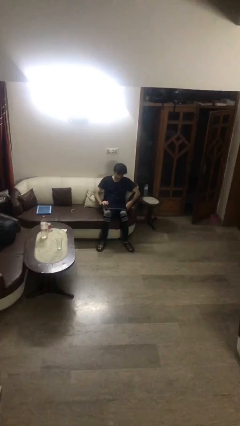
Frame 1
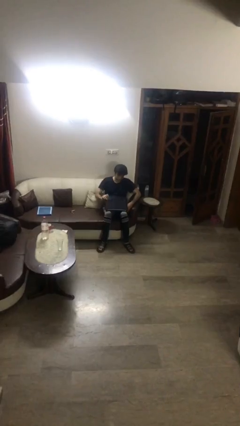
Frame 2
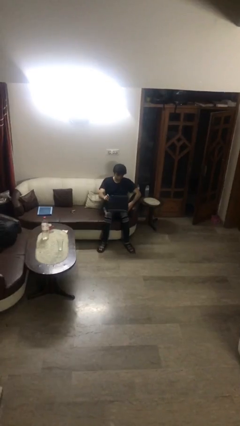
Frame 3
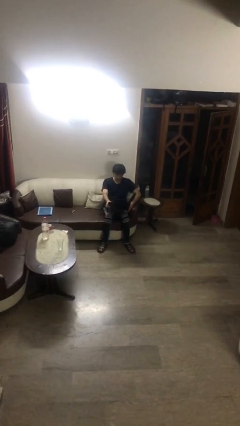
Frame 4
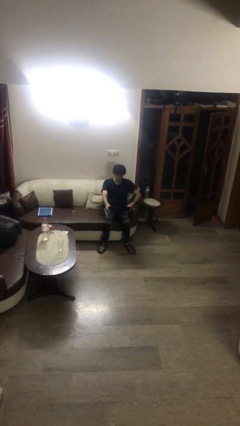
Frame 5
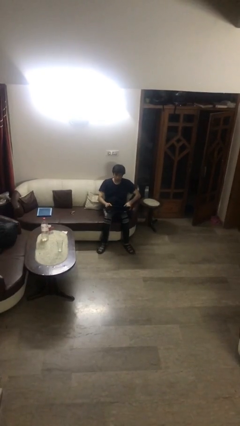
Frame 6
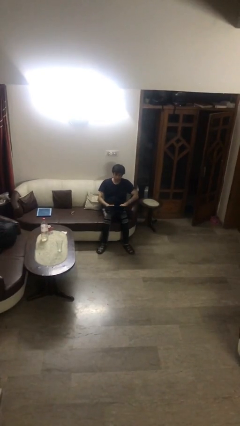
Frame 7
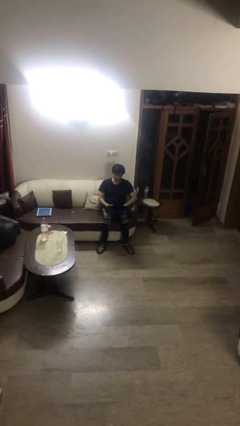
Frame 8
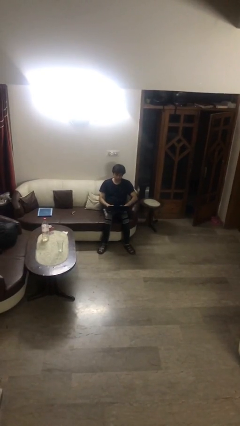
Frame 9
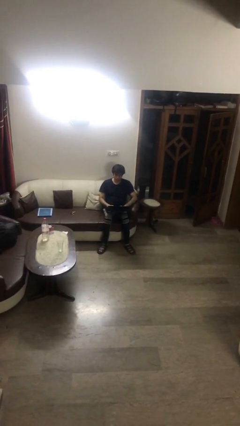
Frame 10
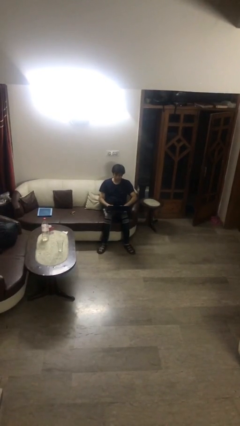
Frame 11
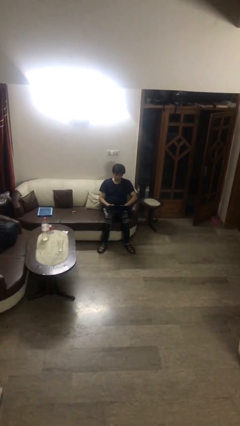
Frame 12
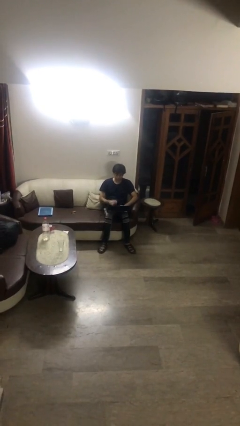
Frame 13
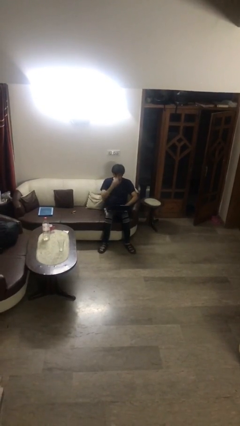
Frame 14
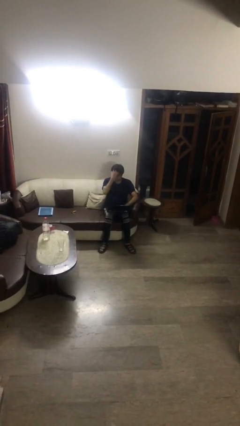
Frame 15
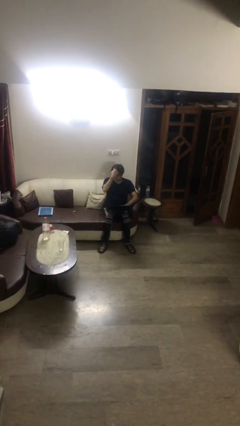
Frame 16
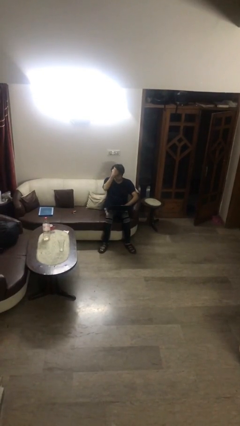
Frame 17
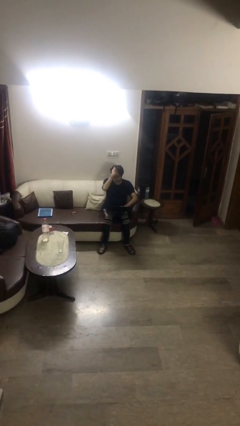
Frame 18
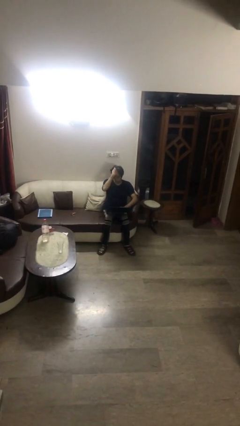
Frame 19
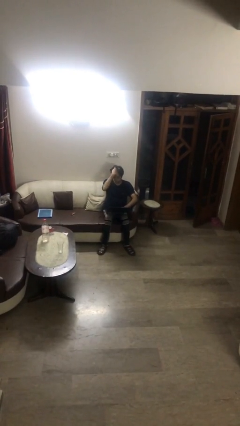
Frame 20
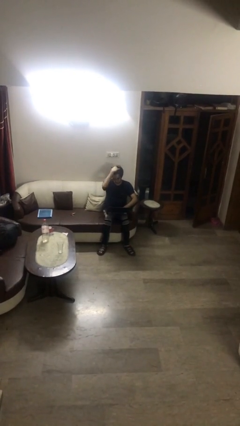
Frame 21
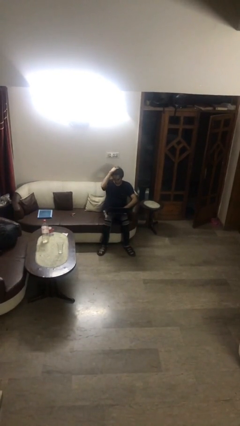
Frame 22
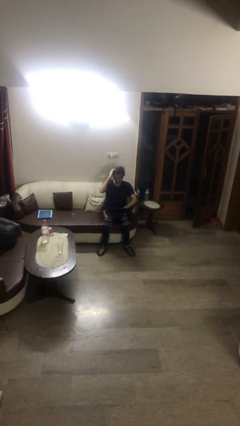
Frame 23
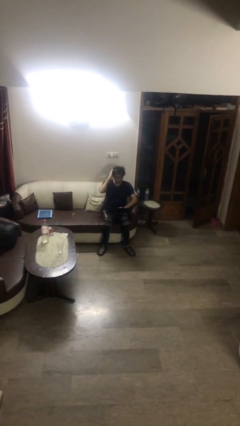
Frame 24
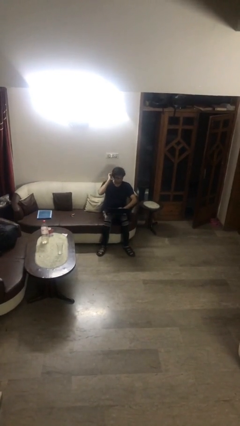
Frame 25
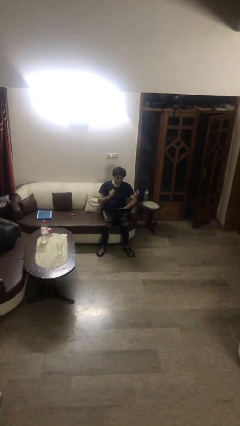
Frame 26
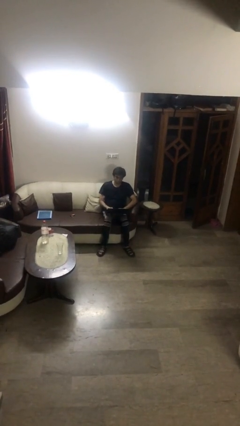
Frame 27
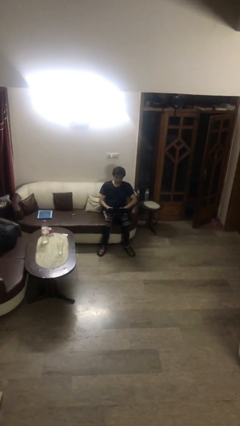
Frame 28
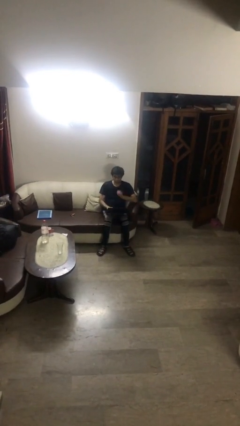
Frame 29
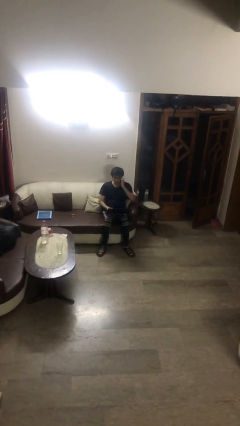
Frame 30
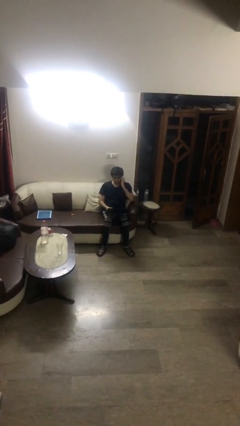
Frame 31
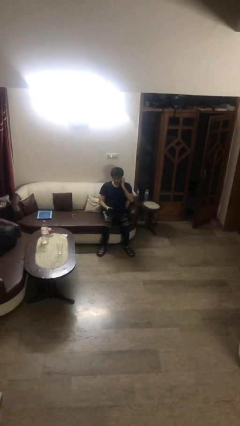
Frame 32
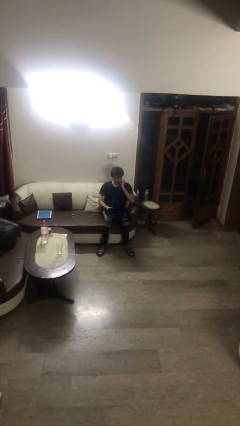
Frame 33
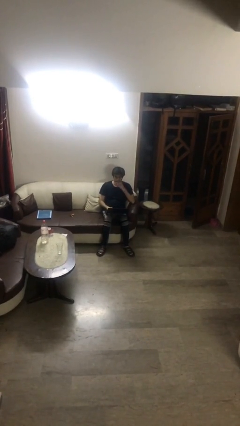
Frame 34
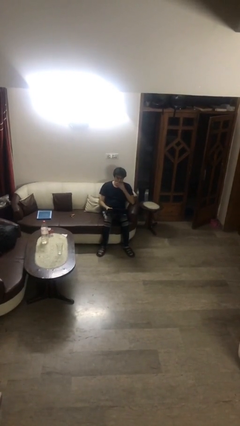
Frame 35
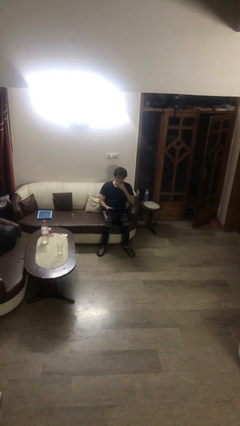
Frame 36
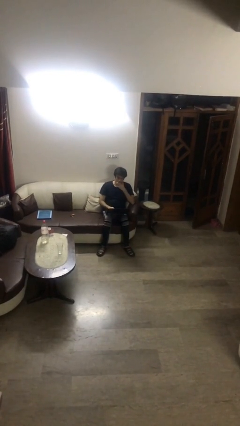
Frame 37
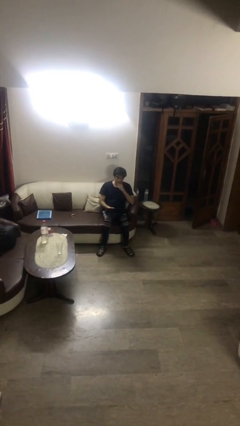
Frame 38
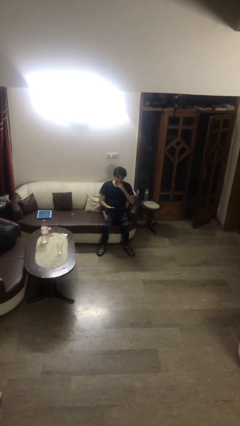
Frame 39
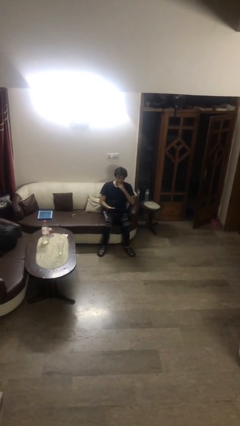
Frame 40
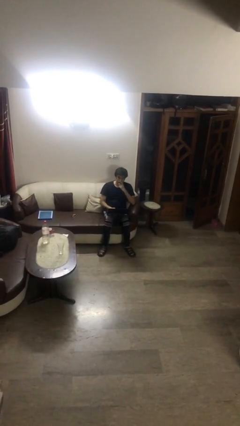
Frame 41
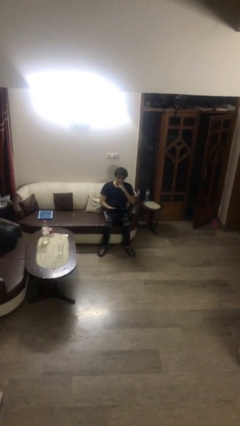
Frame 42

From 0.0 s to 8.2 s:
person interacts with laptop

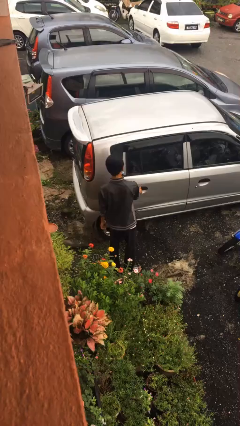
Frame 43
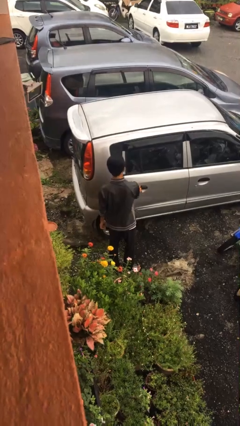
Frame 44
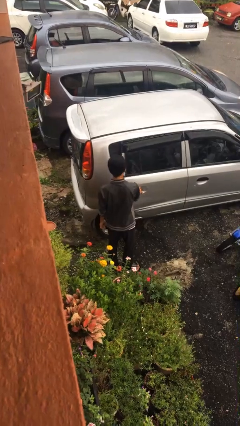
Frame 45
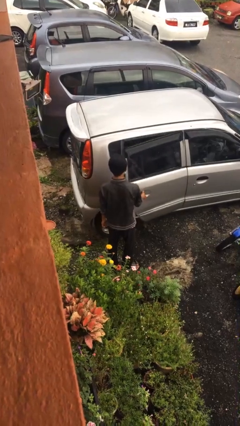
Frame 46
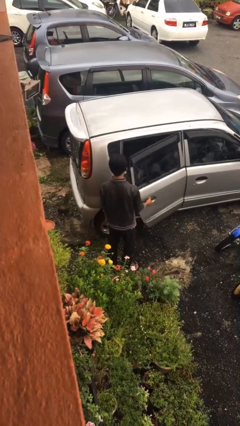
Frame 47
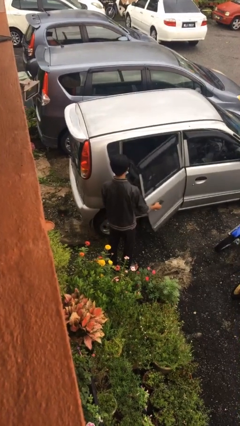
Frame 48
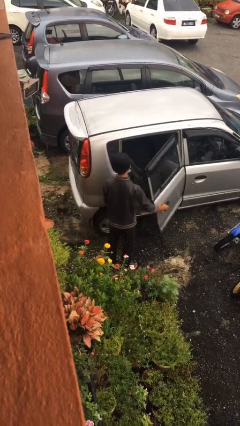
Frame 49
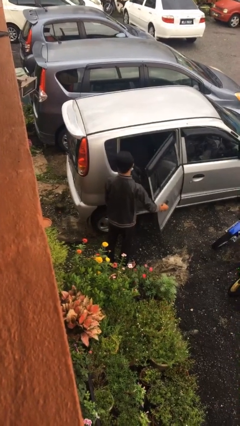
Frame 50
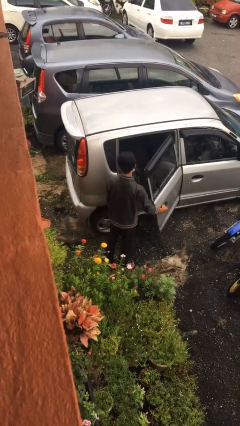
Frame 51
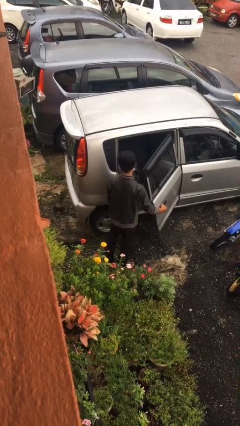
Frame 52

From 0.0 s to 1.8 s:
person opens car door

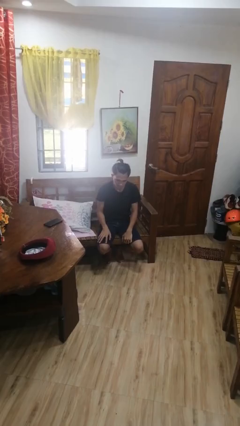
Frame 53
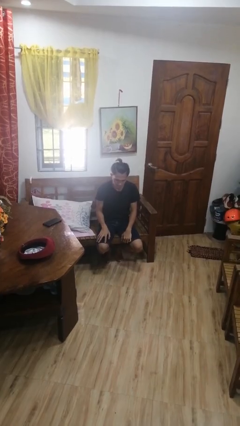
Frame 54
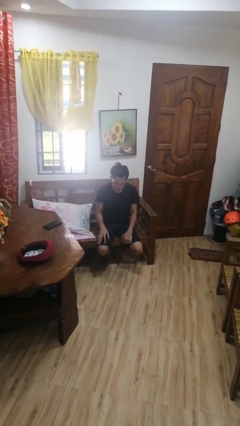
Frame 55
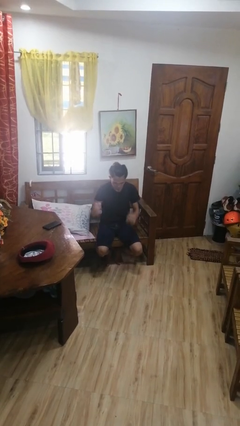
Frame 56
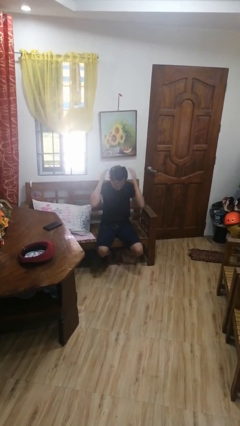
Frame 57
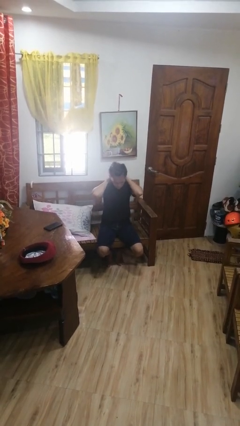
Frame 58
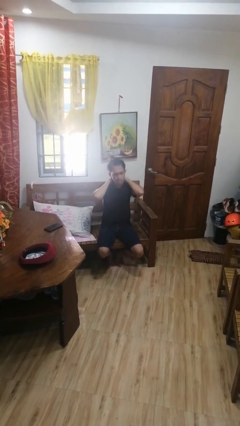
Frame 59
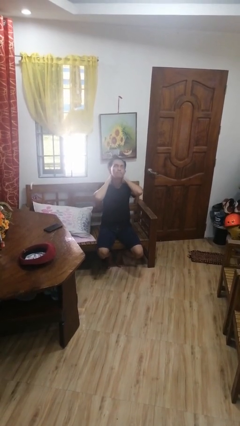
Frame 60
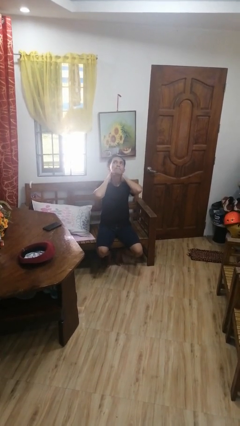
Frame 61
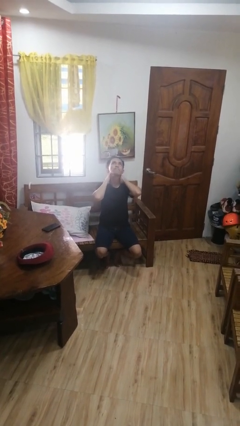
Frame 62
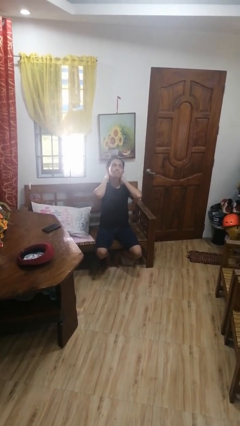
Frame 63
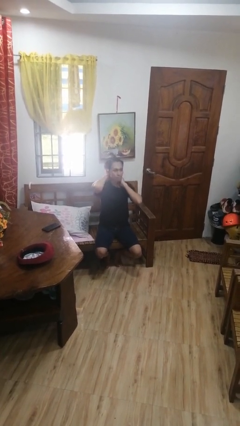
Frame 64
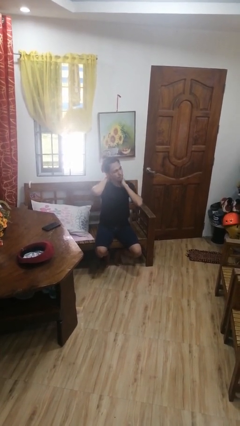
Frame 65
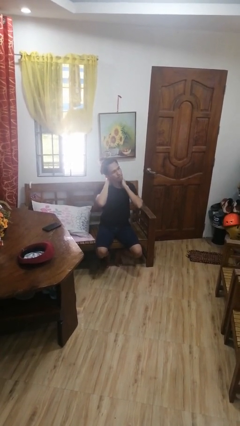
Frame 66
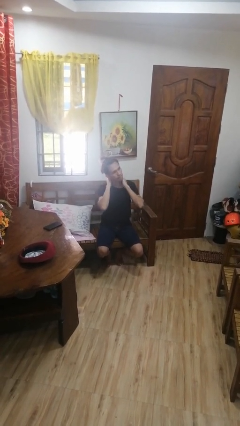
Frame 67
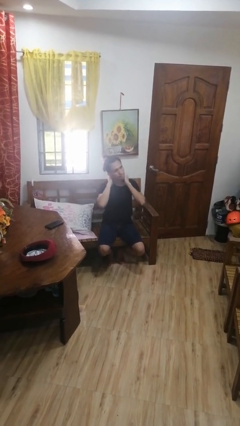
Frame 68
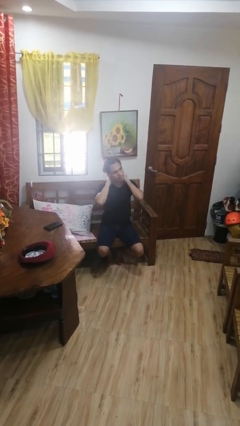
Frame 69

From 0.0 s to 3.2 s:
person rubs neck

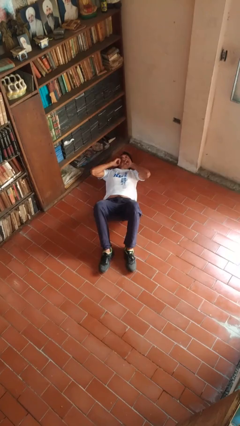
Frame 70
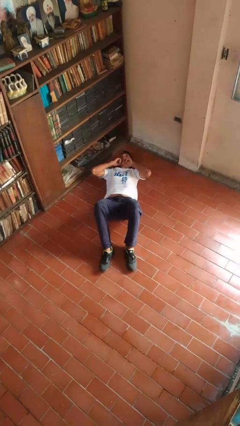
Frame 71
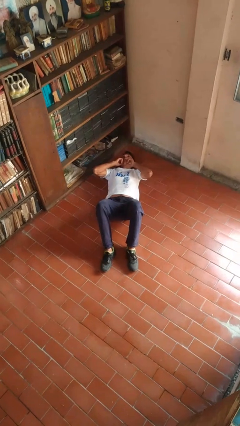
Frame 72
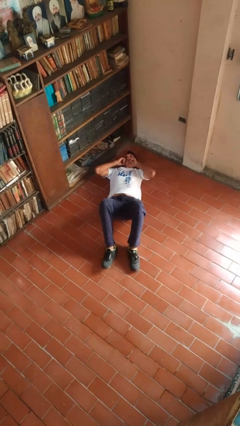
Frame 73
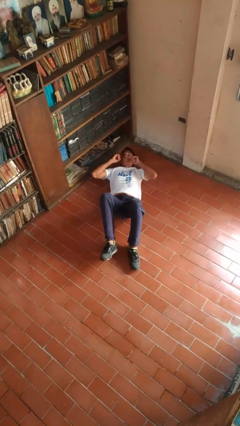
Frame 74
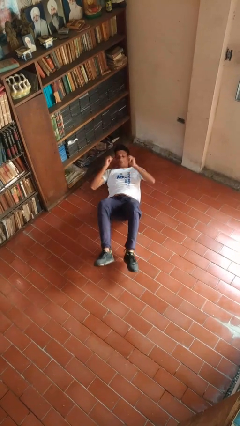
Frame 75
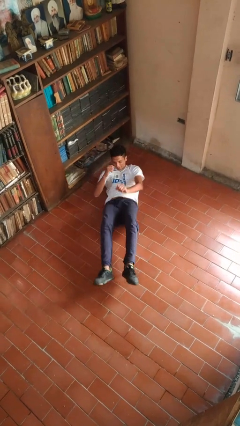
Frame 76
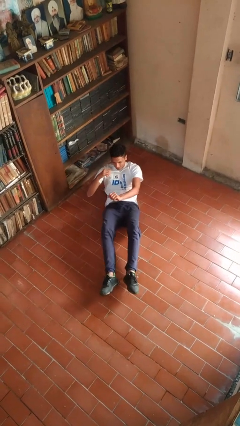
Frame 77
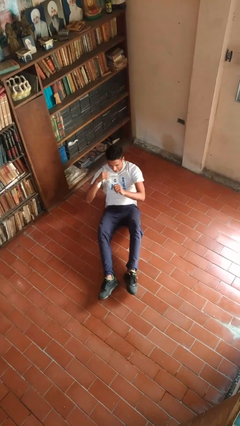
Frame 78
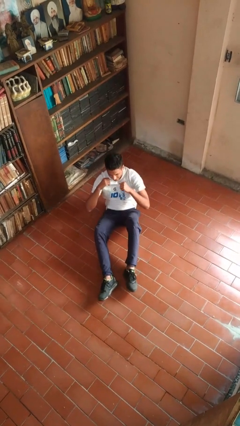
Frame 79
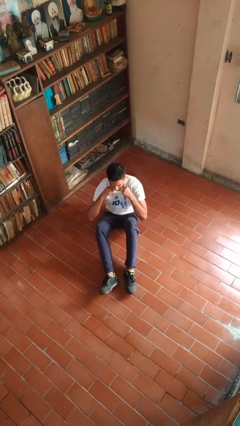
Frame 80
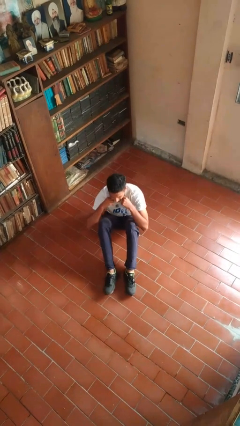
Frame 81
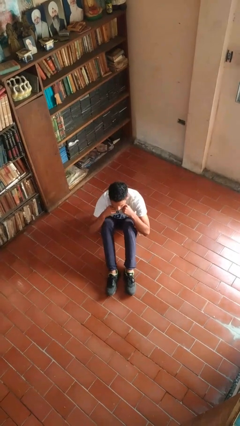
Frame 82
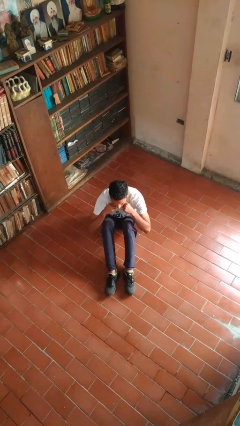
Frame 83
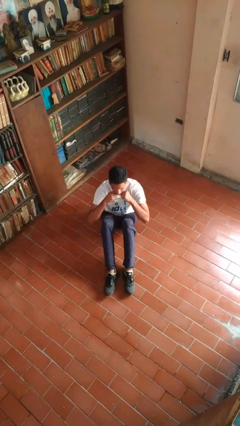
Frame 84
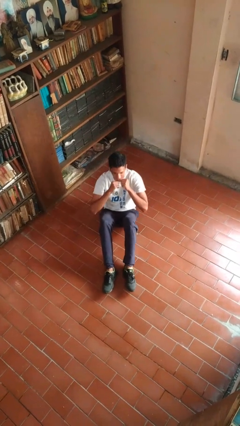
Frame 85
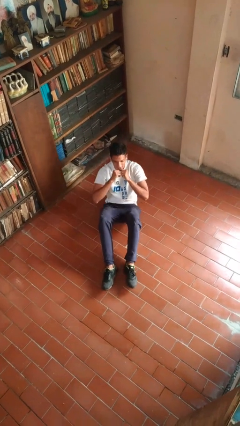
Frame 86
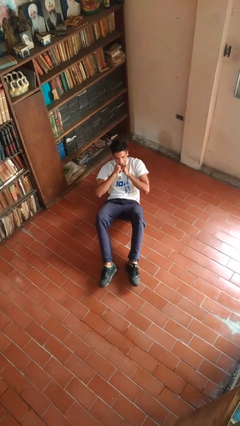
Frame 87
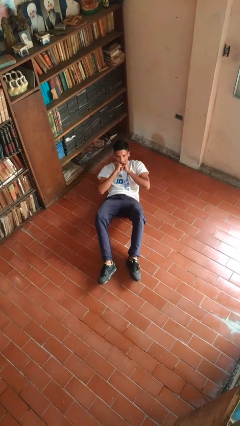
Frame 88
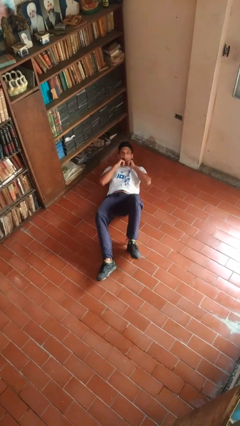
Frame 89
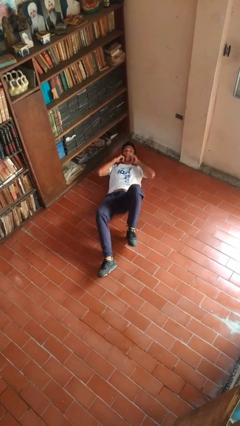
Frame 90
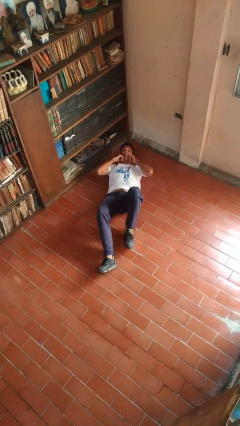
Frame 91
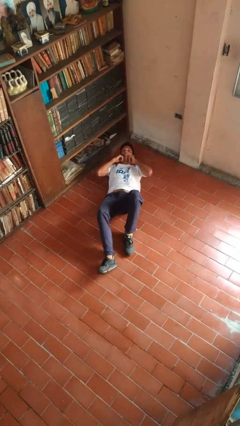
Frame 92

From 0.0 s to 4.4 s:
person exercises with situp

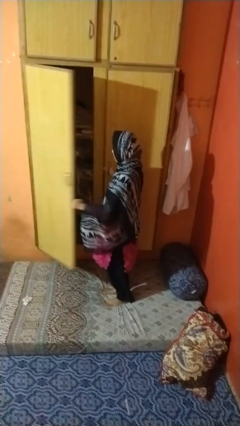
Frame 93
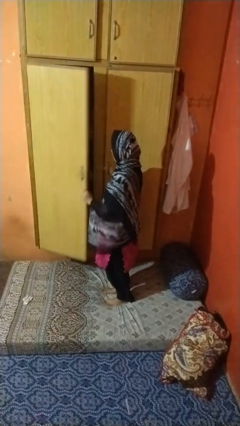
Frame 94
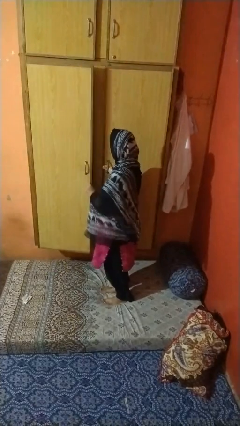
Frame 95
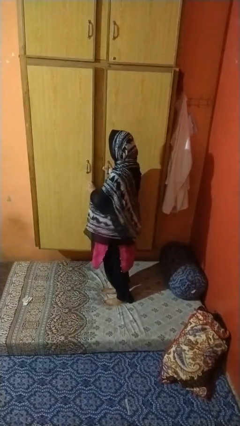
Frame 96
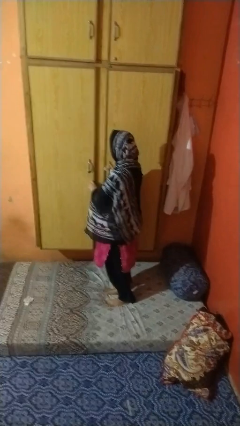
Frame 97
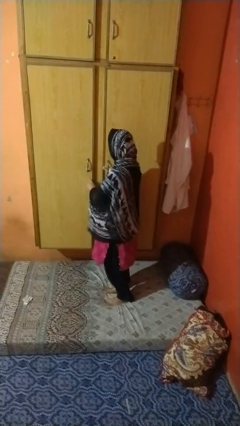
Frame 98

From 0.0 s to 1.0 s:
person closes closet door
